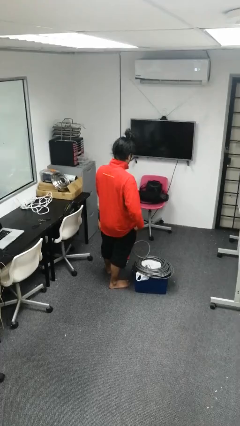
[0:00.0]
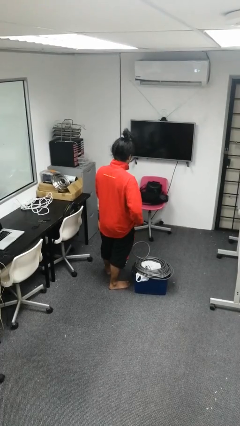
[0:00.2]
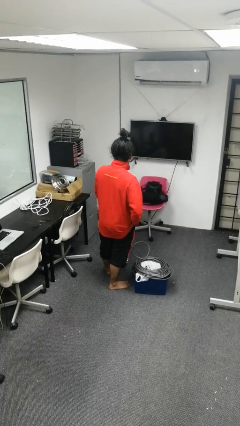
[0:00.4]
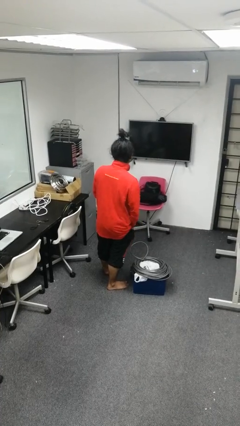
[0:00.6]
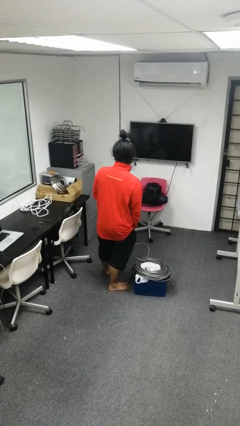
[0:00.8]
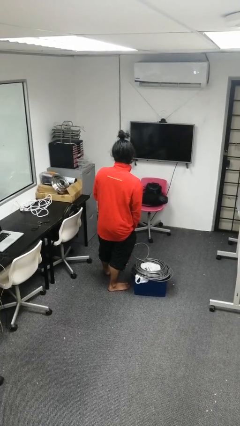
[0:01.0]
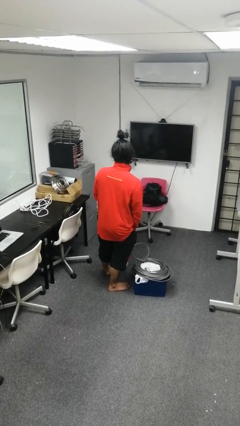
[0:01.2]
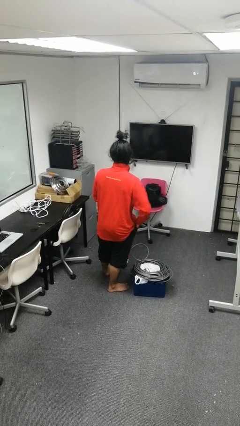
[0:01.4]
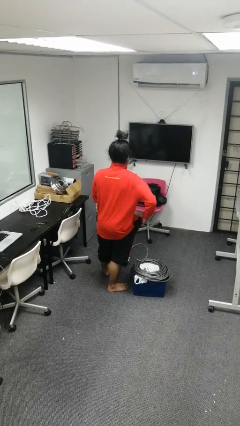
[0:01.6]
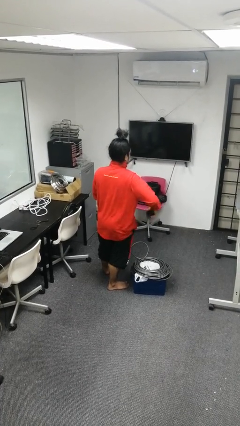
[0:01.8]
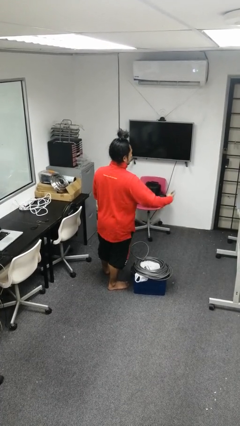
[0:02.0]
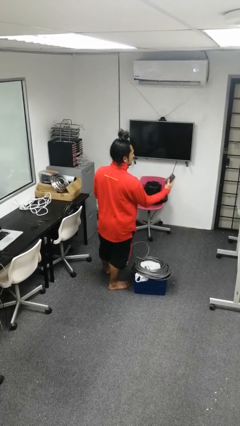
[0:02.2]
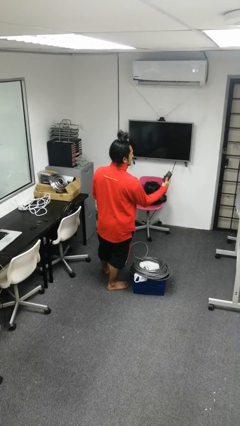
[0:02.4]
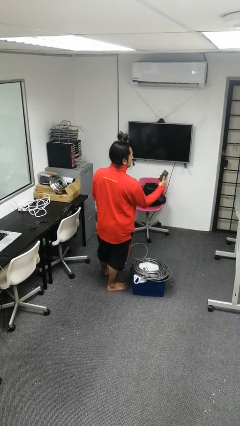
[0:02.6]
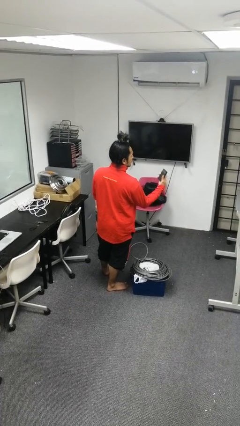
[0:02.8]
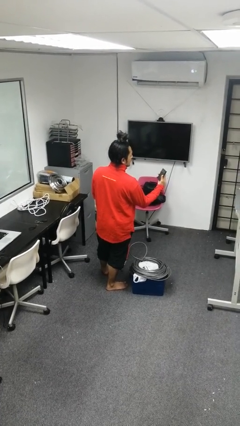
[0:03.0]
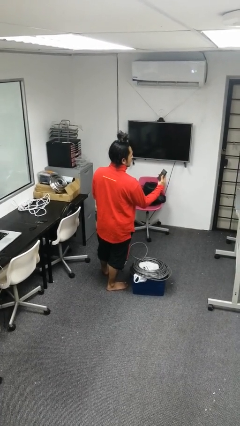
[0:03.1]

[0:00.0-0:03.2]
person takes phone from pocket

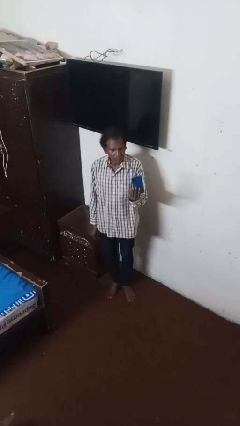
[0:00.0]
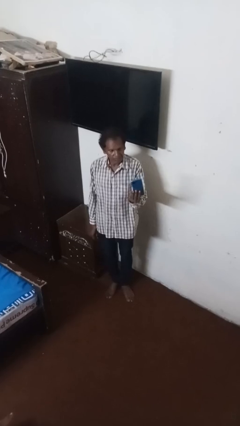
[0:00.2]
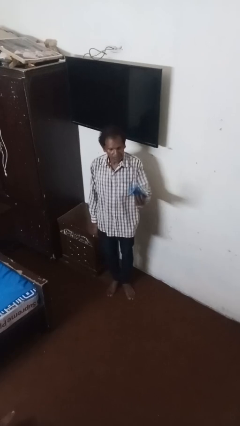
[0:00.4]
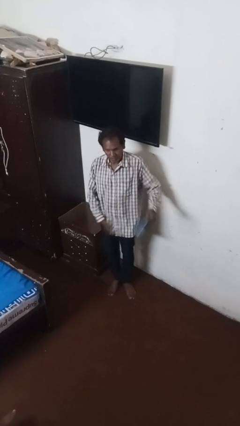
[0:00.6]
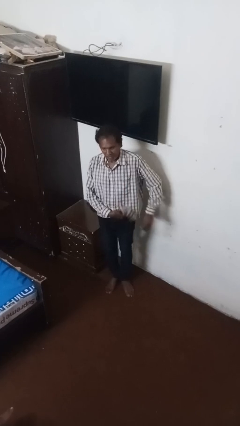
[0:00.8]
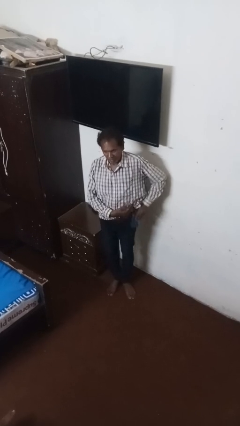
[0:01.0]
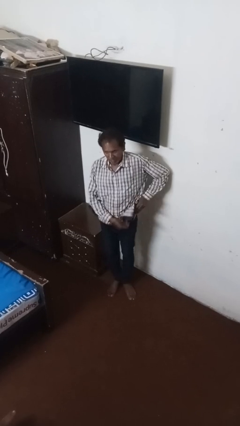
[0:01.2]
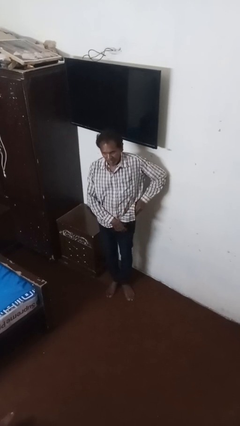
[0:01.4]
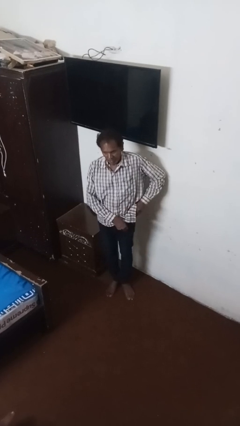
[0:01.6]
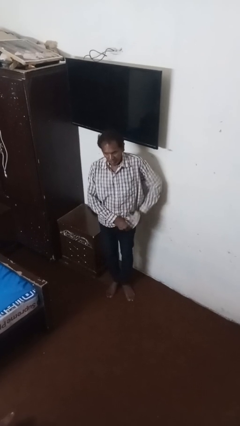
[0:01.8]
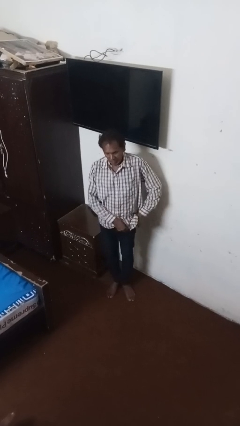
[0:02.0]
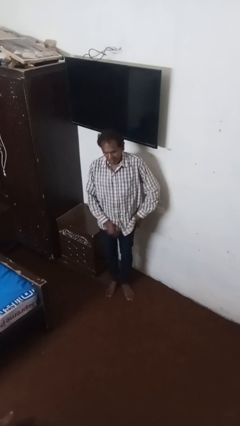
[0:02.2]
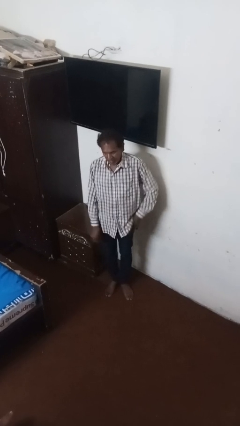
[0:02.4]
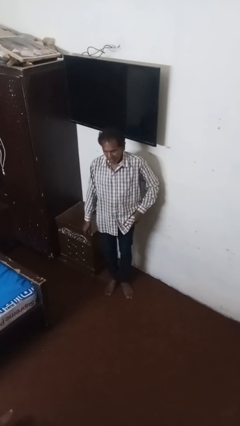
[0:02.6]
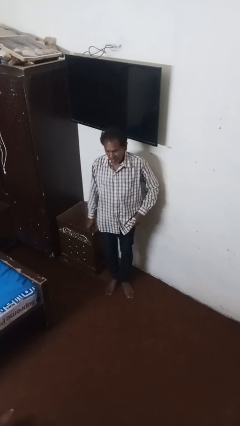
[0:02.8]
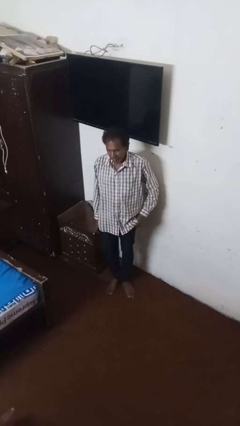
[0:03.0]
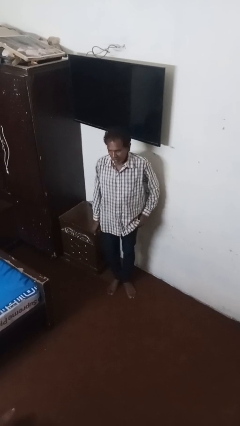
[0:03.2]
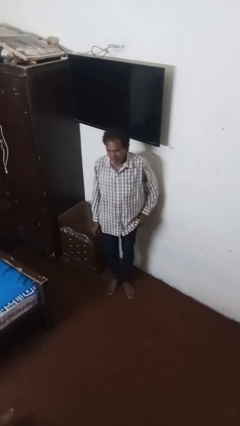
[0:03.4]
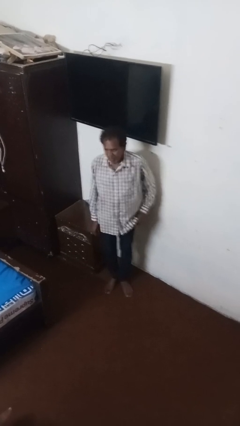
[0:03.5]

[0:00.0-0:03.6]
person puts phone into pocket

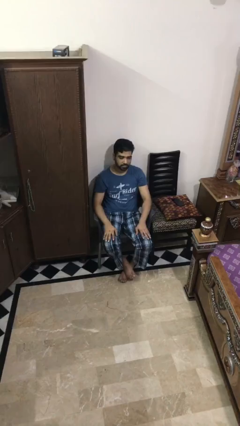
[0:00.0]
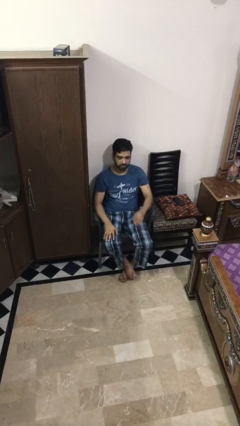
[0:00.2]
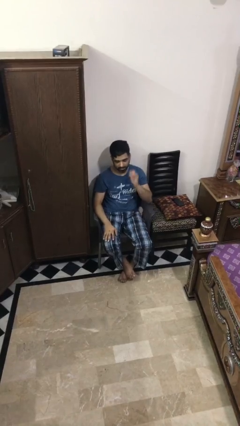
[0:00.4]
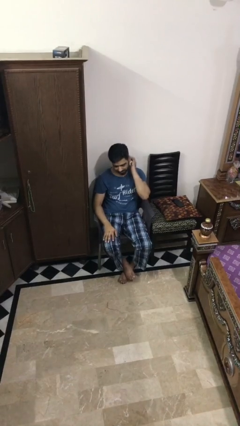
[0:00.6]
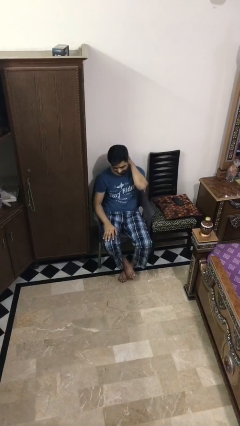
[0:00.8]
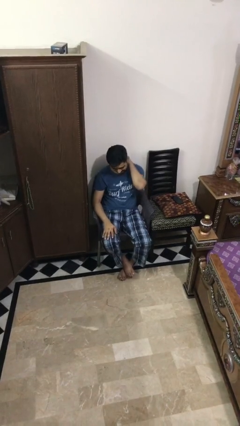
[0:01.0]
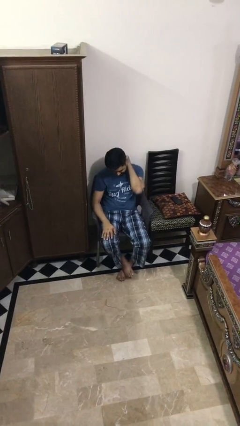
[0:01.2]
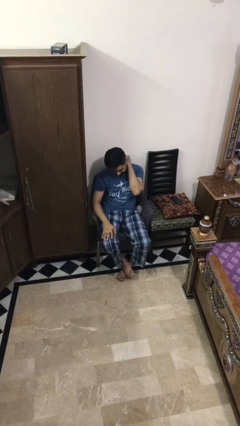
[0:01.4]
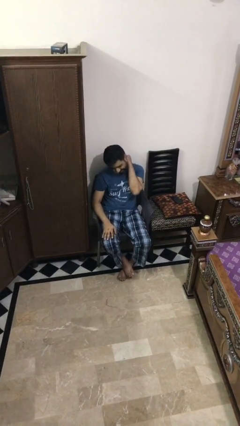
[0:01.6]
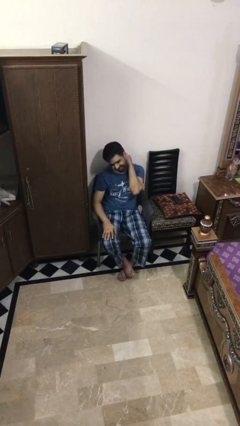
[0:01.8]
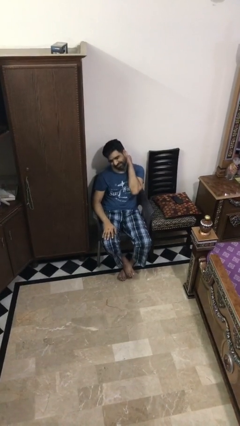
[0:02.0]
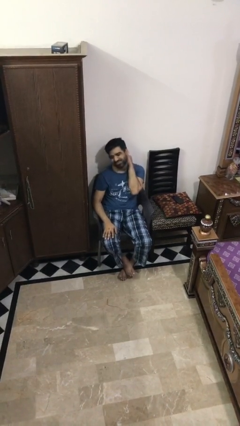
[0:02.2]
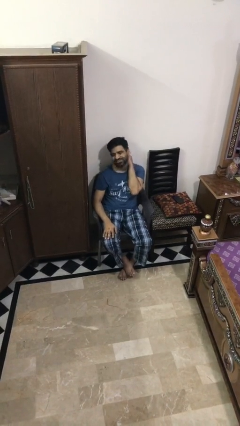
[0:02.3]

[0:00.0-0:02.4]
person rubs neck

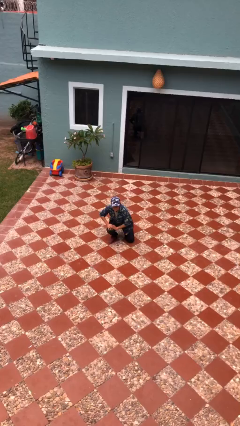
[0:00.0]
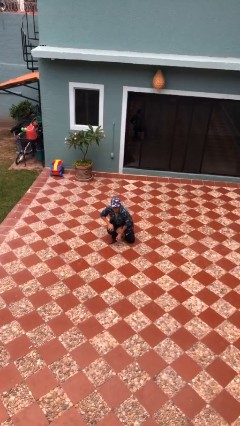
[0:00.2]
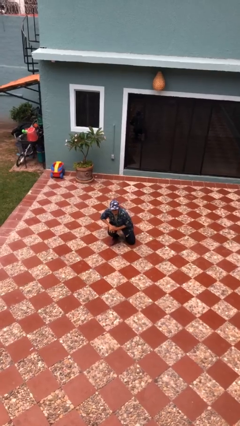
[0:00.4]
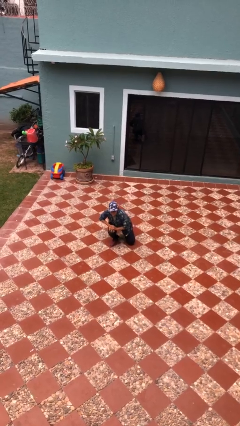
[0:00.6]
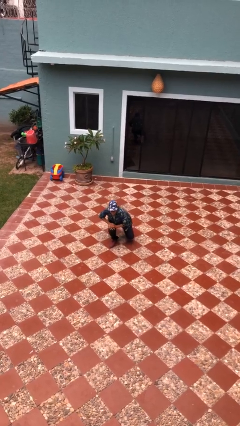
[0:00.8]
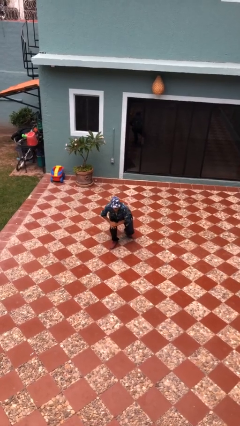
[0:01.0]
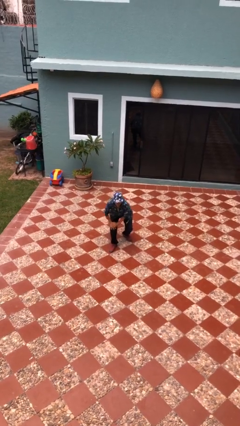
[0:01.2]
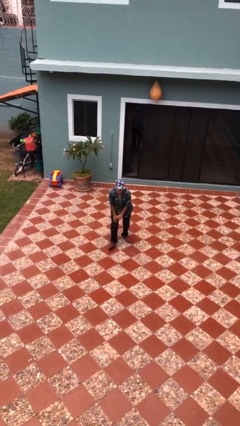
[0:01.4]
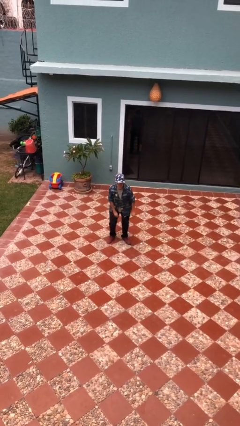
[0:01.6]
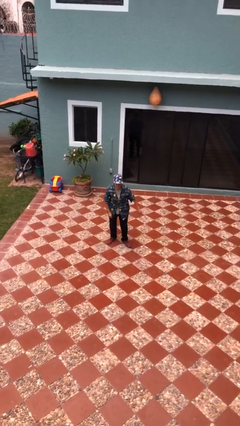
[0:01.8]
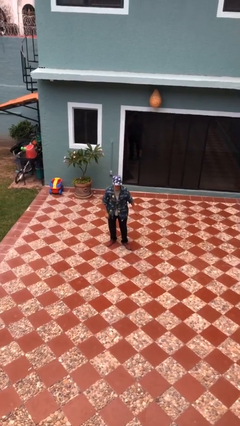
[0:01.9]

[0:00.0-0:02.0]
person stands up from floor

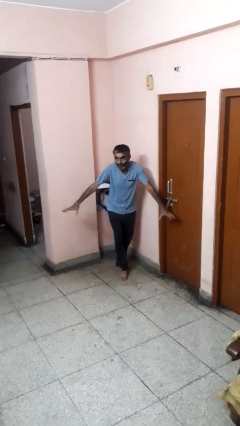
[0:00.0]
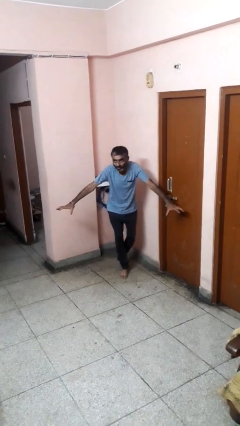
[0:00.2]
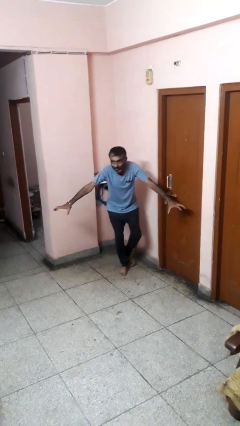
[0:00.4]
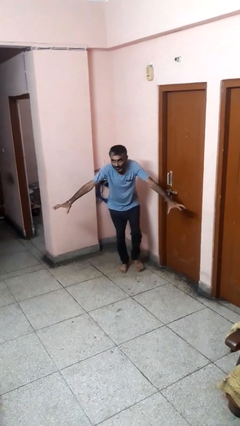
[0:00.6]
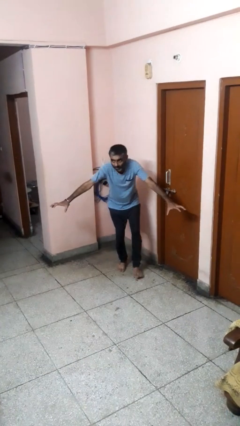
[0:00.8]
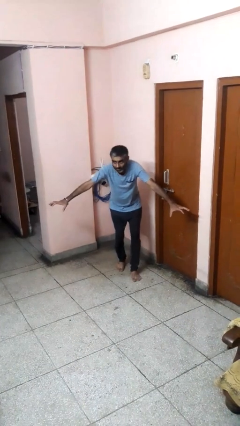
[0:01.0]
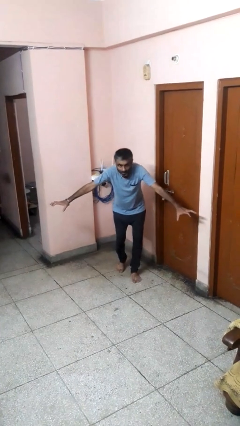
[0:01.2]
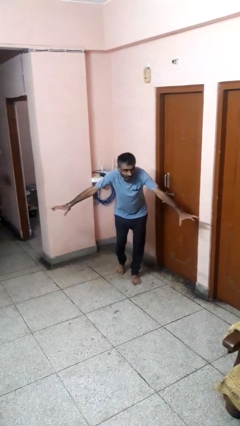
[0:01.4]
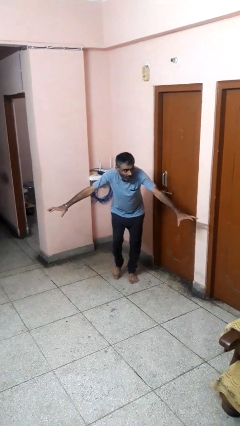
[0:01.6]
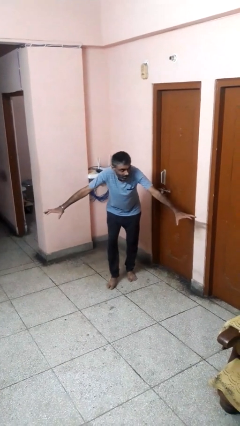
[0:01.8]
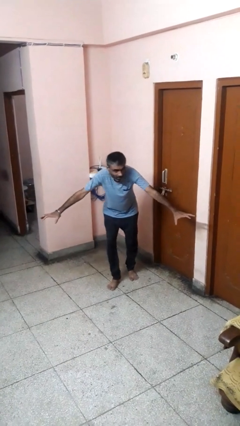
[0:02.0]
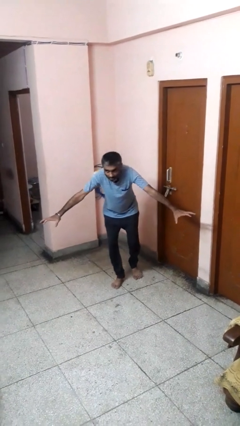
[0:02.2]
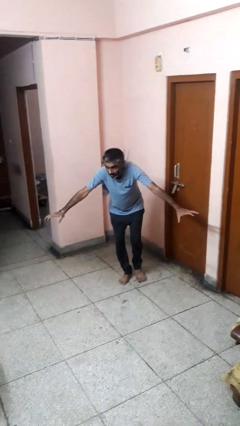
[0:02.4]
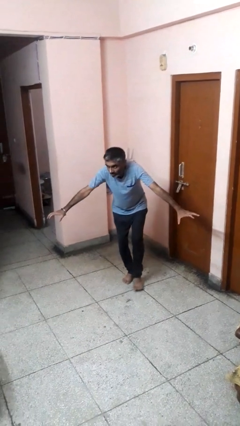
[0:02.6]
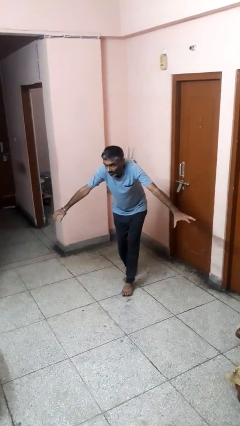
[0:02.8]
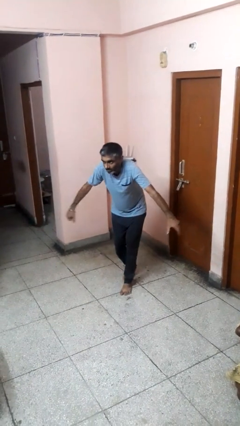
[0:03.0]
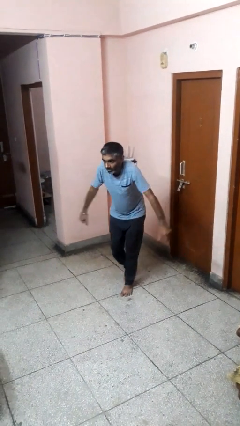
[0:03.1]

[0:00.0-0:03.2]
person walks tiptoe

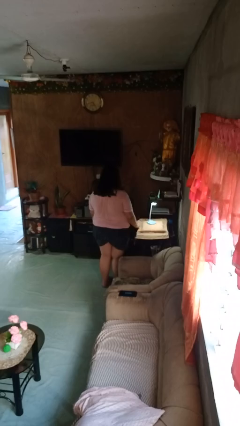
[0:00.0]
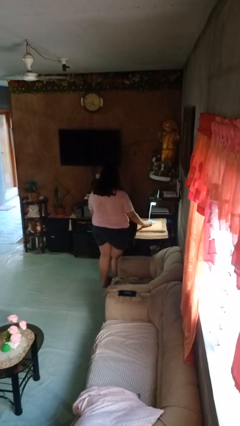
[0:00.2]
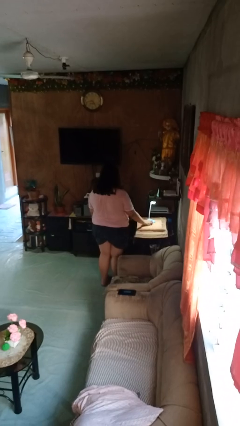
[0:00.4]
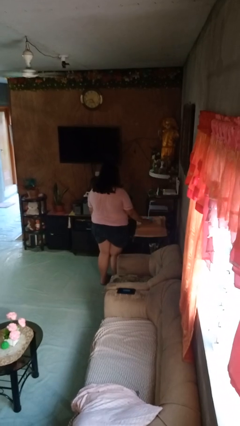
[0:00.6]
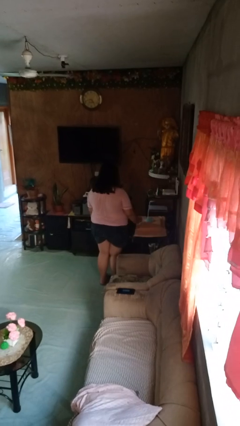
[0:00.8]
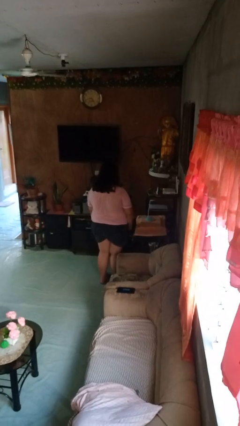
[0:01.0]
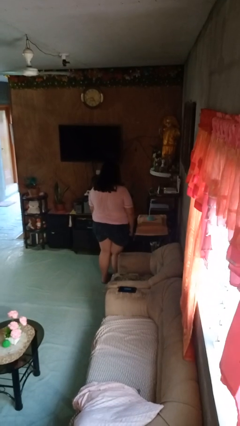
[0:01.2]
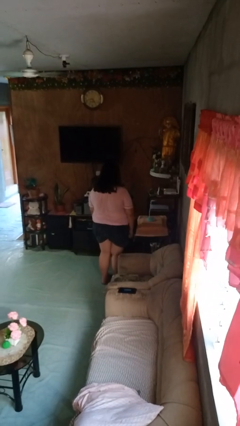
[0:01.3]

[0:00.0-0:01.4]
person turns off lamp

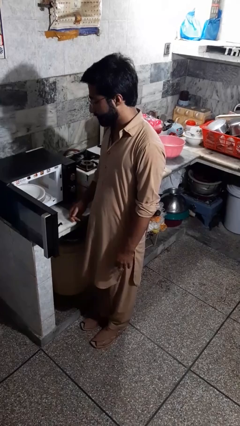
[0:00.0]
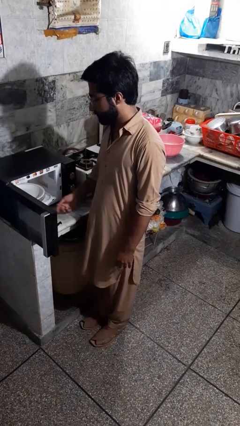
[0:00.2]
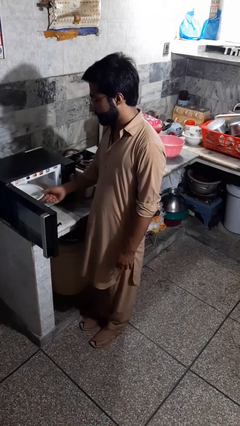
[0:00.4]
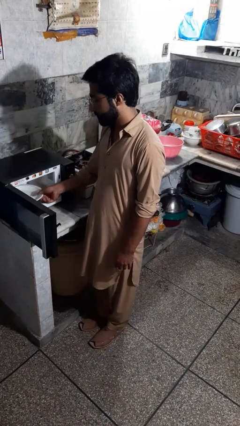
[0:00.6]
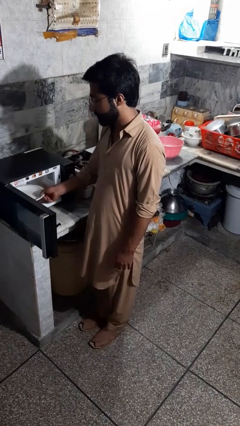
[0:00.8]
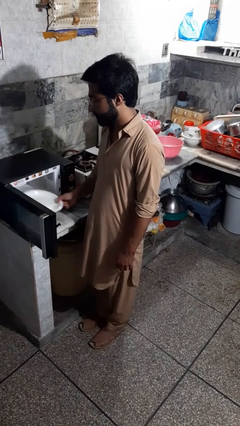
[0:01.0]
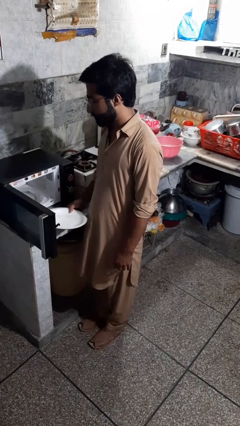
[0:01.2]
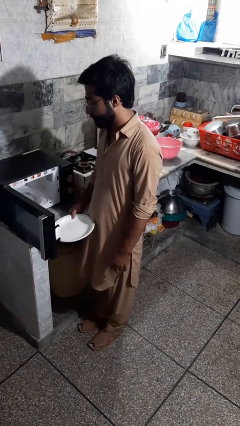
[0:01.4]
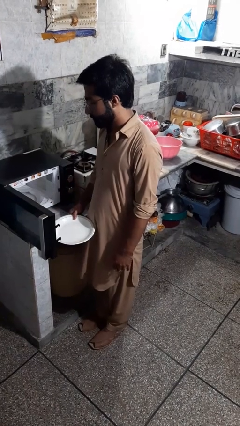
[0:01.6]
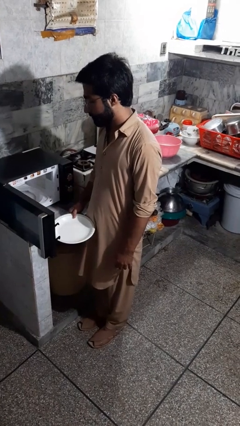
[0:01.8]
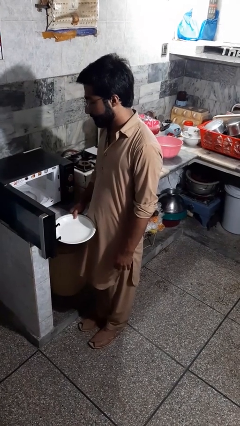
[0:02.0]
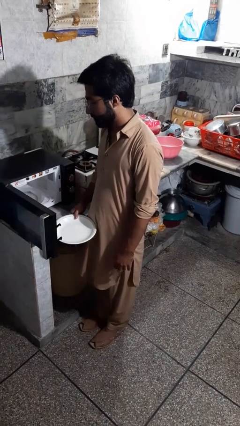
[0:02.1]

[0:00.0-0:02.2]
person takes object from oven
